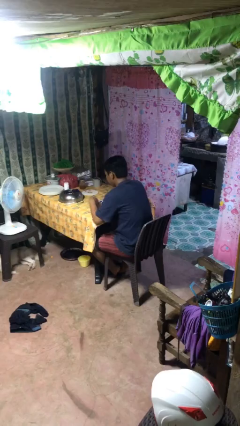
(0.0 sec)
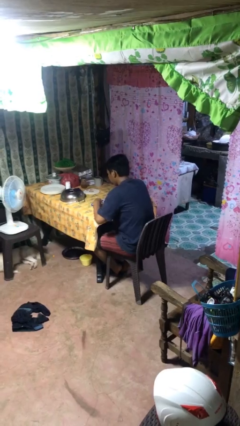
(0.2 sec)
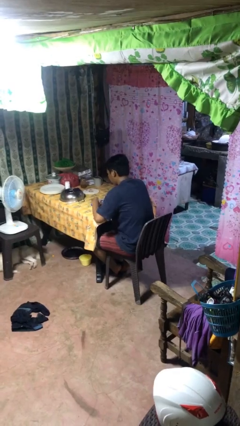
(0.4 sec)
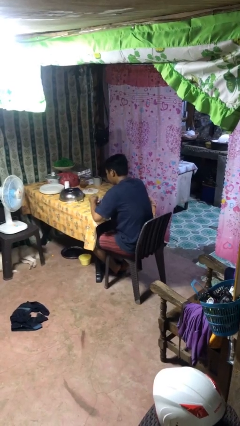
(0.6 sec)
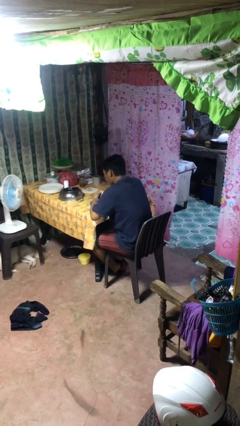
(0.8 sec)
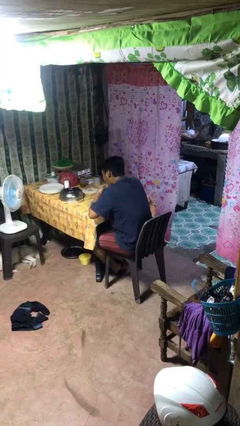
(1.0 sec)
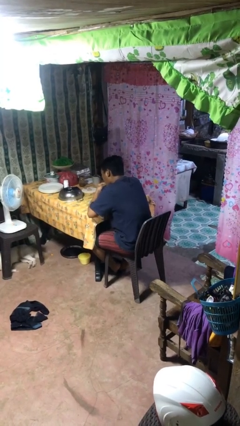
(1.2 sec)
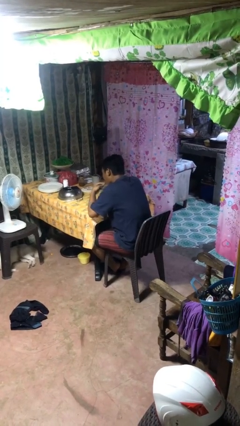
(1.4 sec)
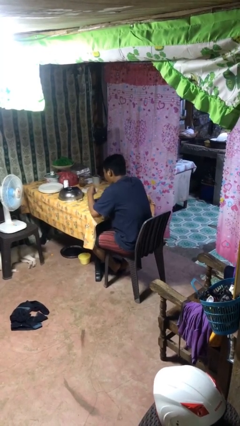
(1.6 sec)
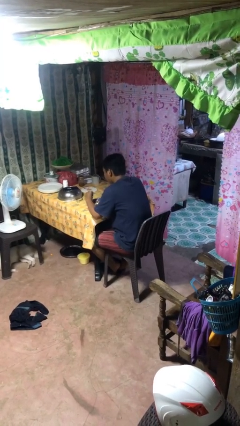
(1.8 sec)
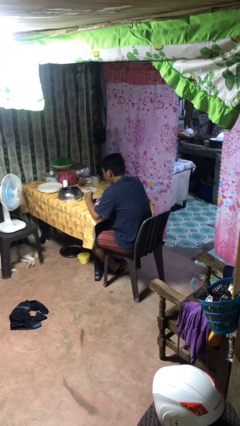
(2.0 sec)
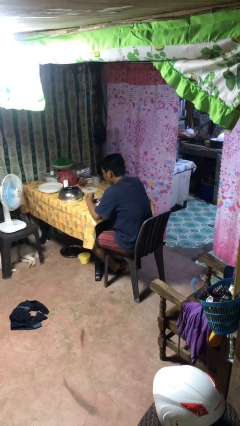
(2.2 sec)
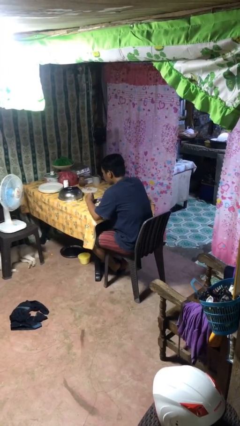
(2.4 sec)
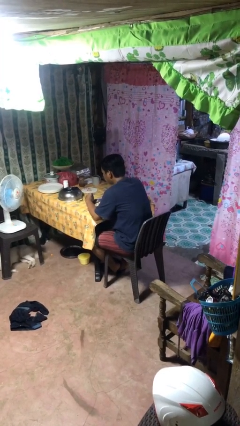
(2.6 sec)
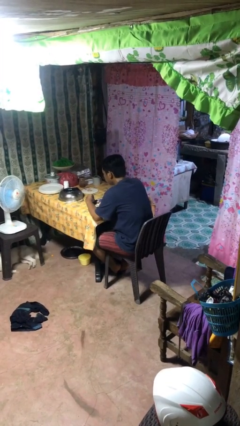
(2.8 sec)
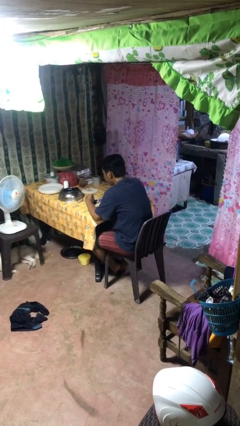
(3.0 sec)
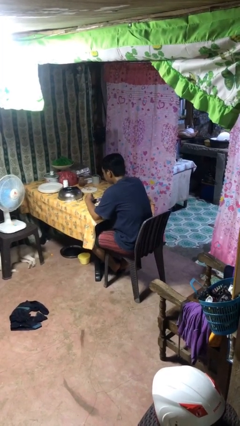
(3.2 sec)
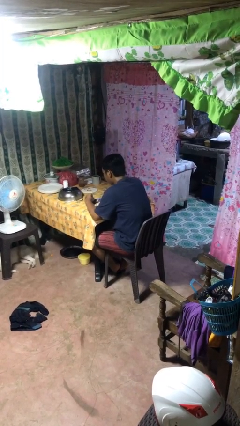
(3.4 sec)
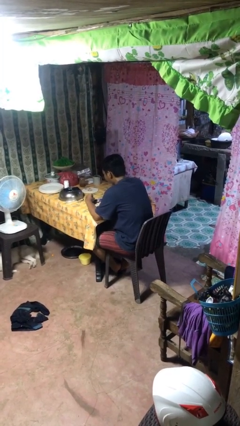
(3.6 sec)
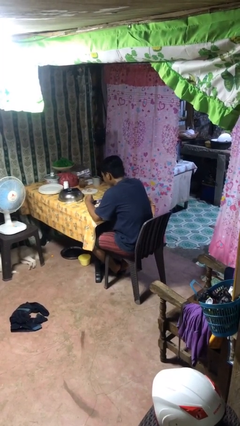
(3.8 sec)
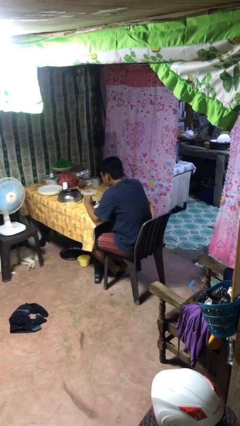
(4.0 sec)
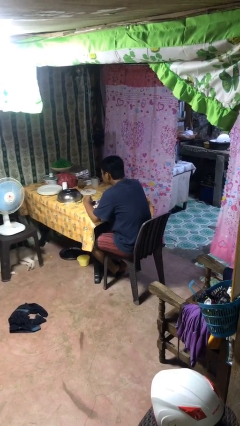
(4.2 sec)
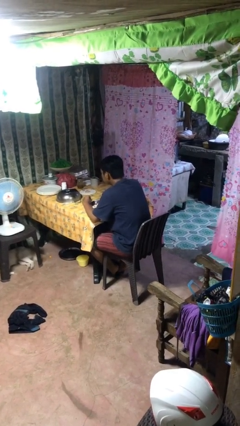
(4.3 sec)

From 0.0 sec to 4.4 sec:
person eats with hands

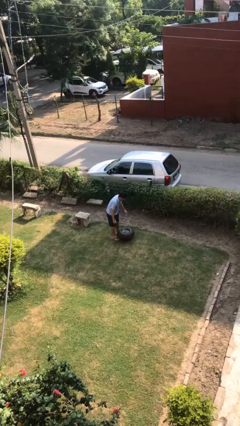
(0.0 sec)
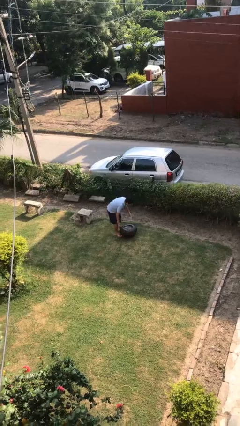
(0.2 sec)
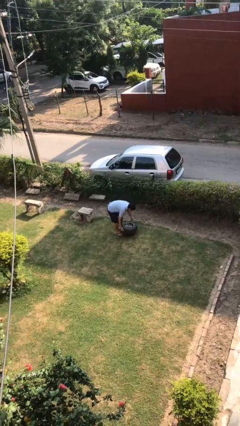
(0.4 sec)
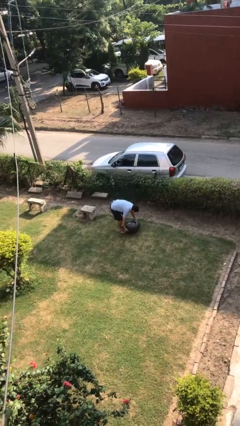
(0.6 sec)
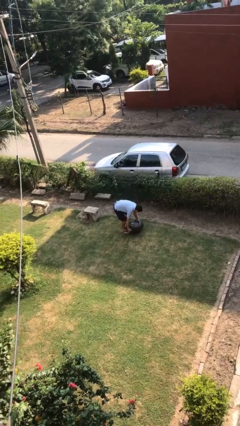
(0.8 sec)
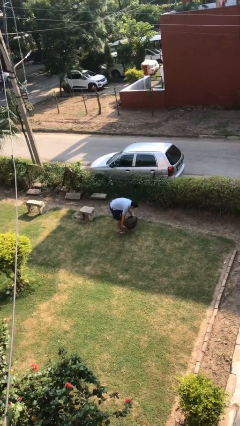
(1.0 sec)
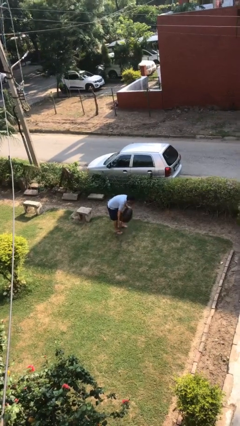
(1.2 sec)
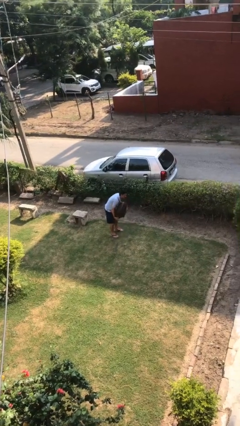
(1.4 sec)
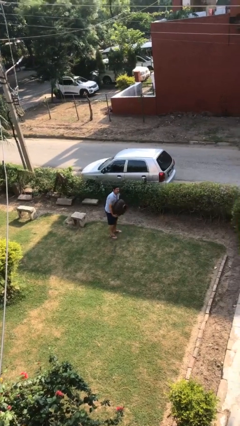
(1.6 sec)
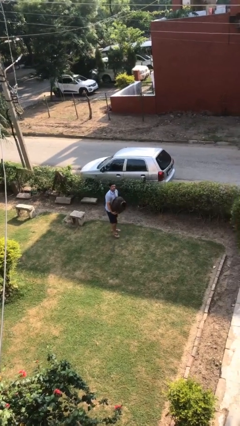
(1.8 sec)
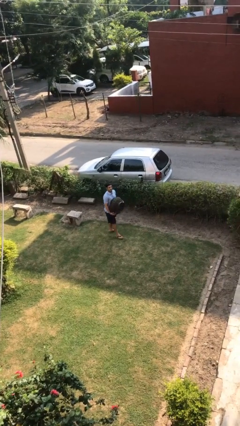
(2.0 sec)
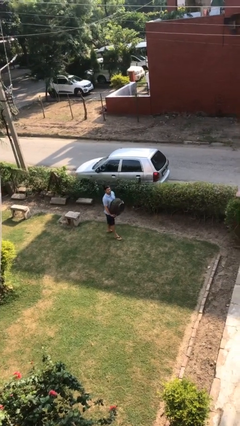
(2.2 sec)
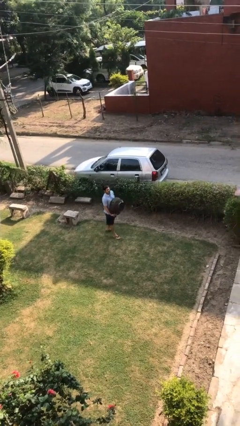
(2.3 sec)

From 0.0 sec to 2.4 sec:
person picks up object from floor

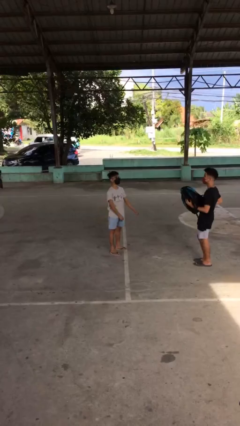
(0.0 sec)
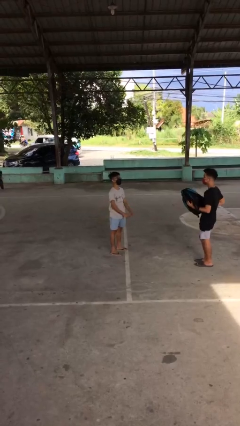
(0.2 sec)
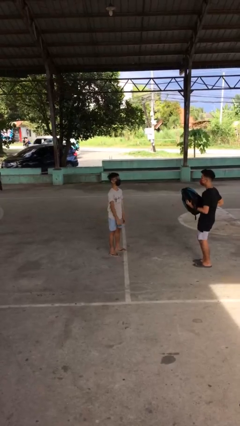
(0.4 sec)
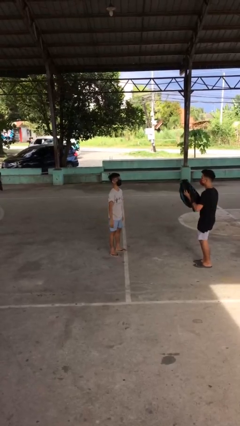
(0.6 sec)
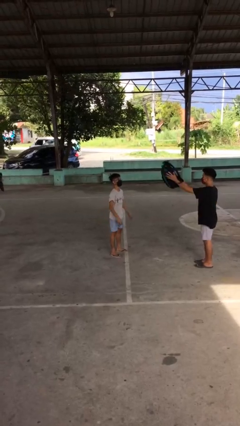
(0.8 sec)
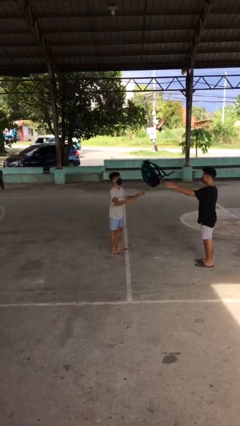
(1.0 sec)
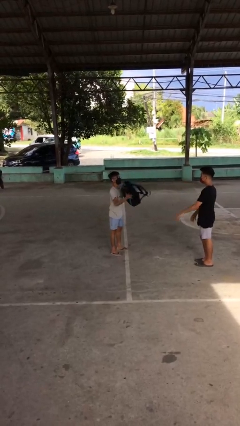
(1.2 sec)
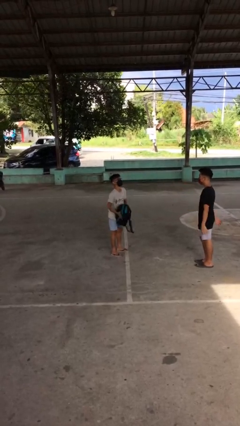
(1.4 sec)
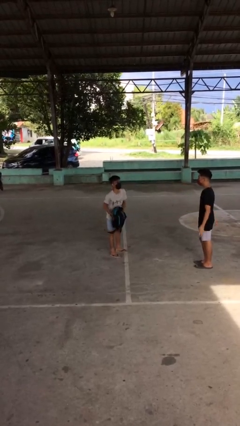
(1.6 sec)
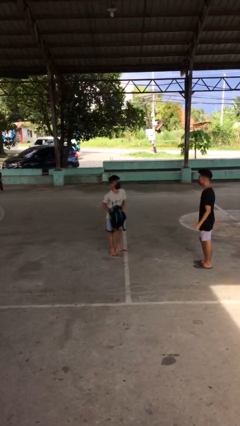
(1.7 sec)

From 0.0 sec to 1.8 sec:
person catches object from person

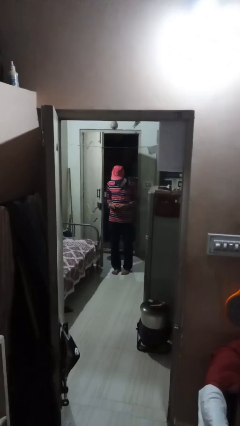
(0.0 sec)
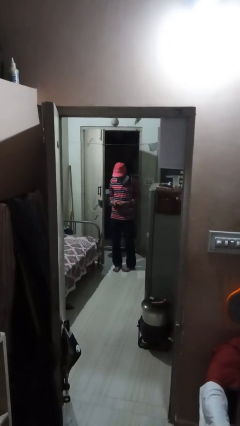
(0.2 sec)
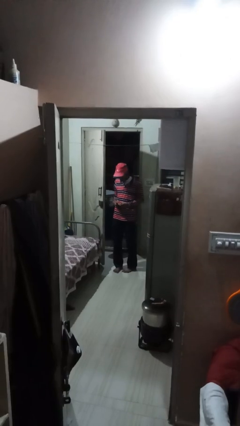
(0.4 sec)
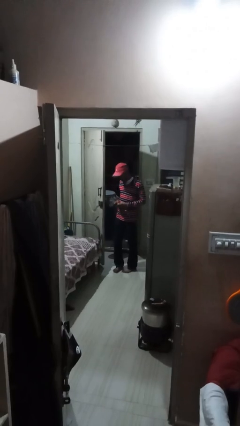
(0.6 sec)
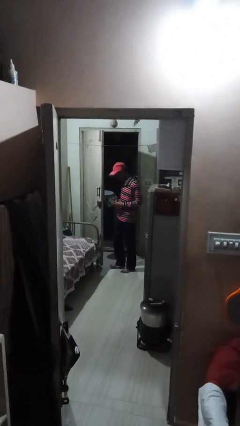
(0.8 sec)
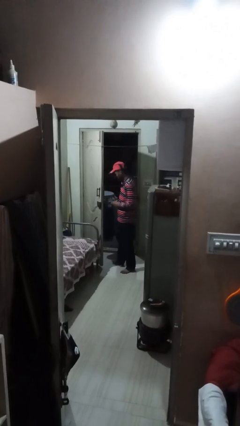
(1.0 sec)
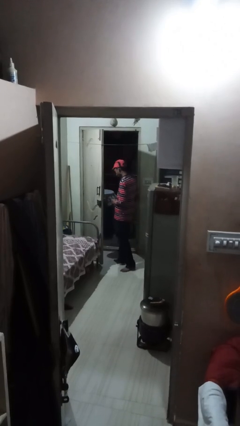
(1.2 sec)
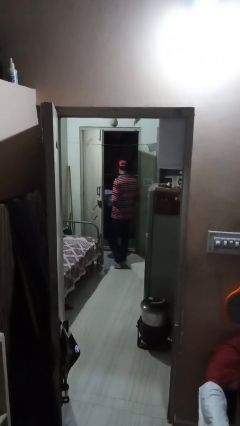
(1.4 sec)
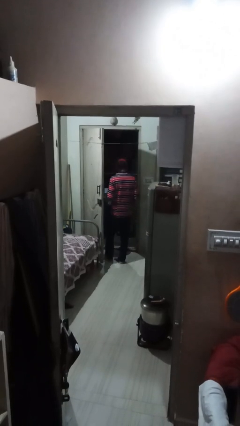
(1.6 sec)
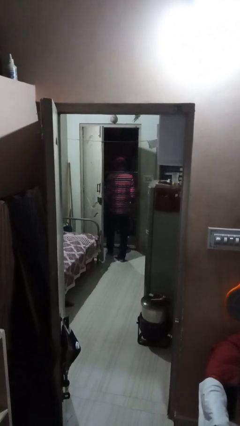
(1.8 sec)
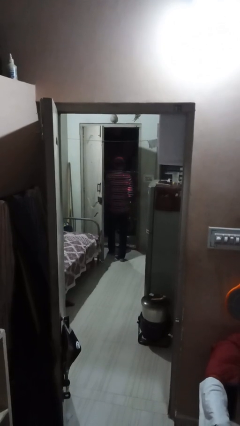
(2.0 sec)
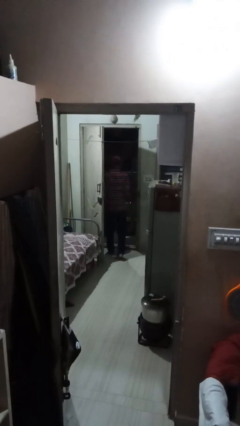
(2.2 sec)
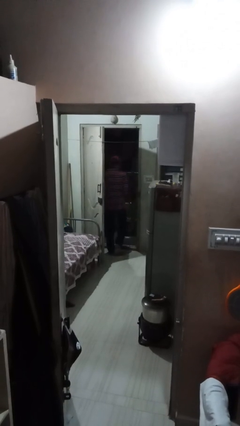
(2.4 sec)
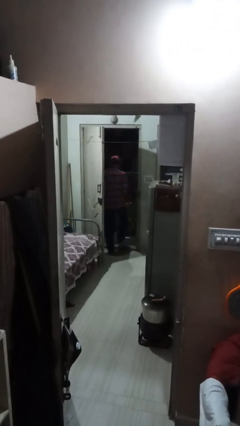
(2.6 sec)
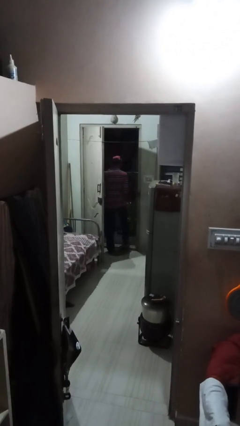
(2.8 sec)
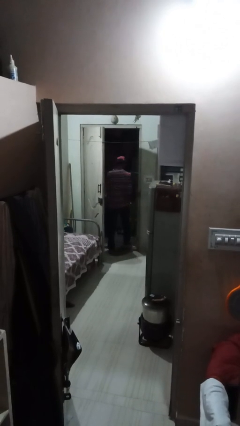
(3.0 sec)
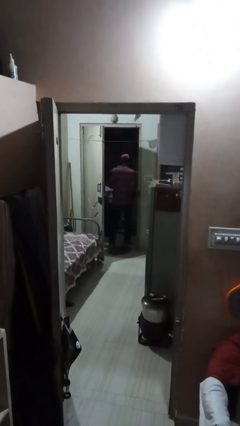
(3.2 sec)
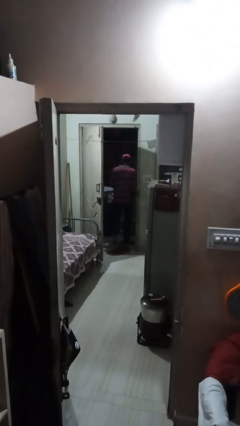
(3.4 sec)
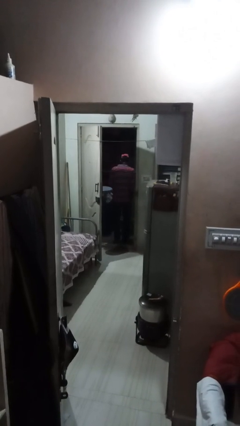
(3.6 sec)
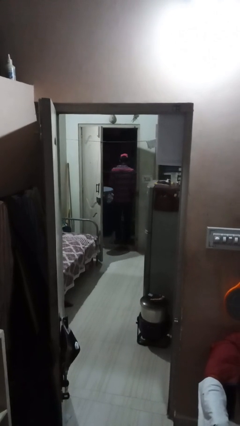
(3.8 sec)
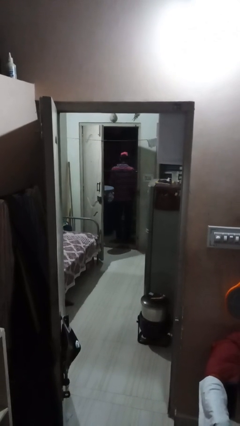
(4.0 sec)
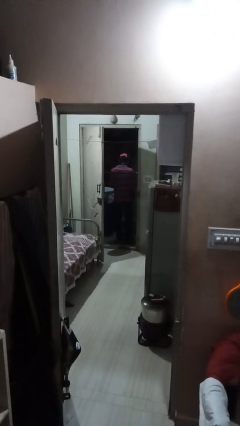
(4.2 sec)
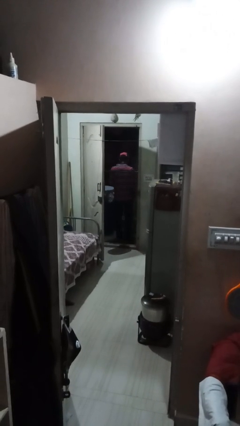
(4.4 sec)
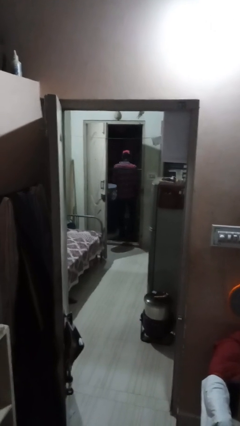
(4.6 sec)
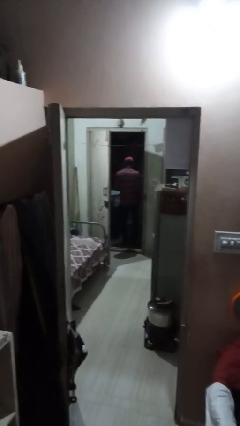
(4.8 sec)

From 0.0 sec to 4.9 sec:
person exits scene through structure

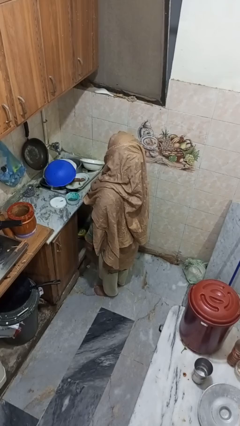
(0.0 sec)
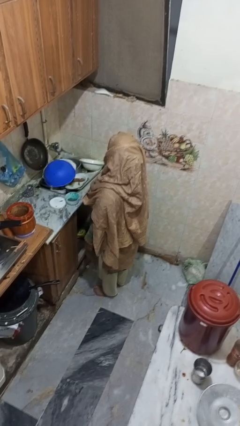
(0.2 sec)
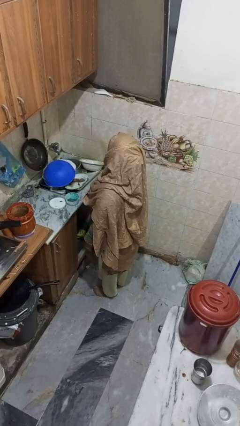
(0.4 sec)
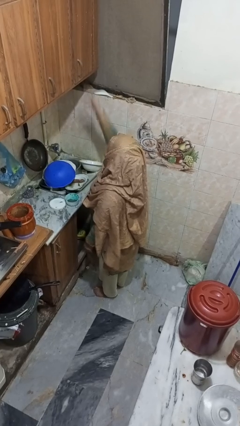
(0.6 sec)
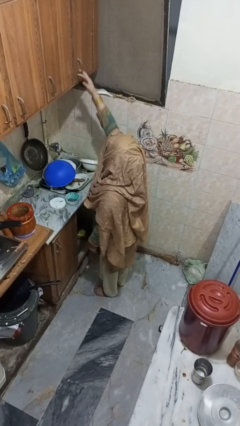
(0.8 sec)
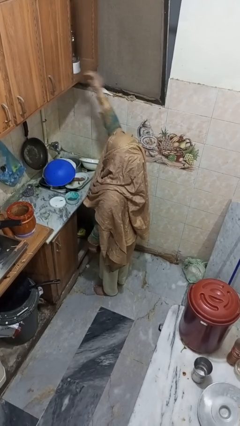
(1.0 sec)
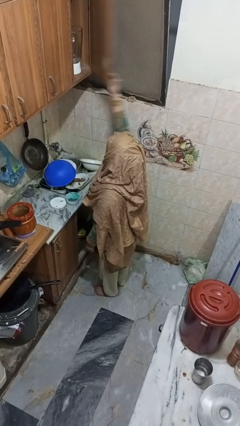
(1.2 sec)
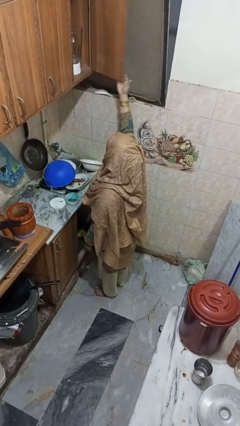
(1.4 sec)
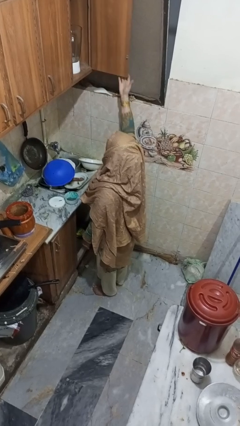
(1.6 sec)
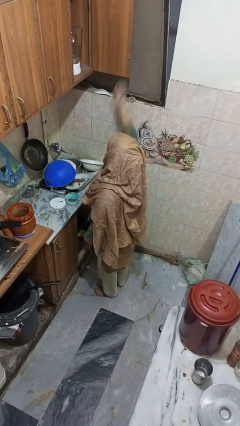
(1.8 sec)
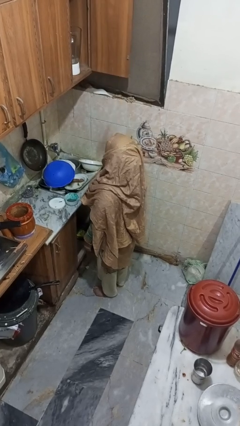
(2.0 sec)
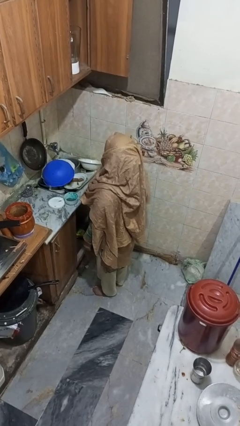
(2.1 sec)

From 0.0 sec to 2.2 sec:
person opens cabinet

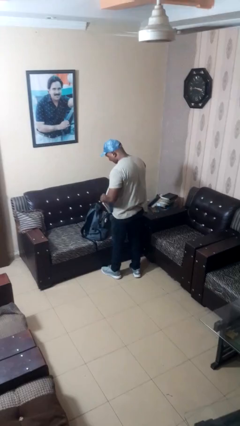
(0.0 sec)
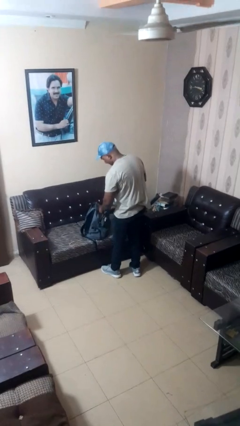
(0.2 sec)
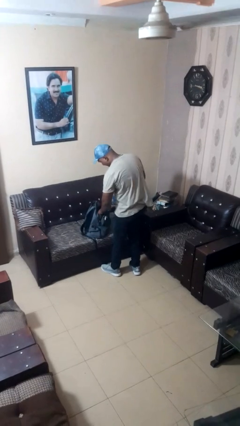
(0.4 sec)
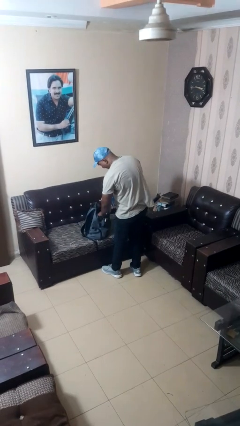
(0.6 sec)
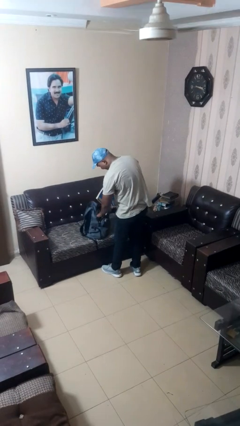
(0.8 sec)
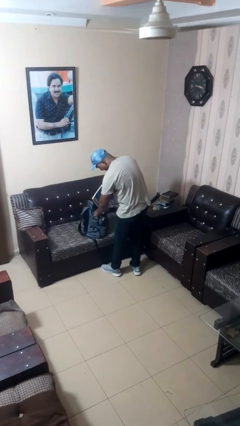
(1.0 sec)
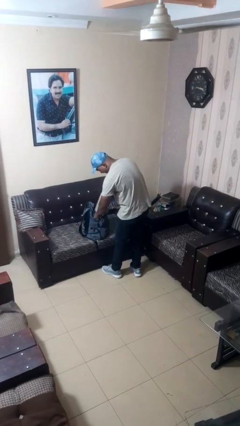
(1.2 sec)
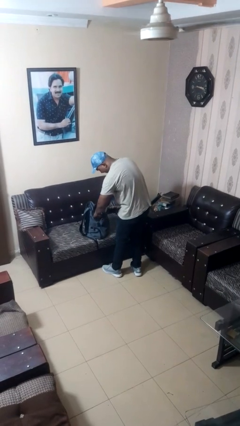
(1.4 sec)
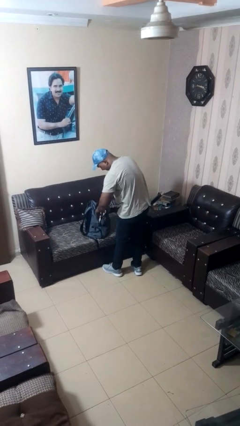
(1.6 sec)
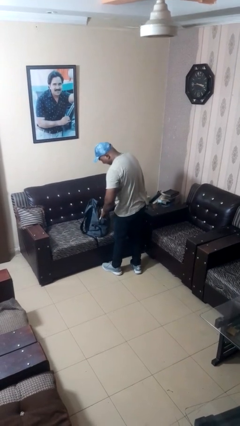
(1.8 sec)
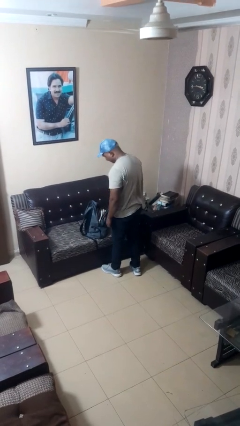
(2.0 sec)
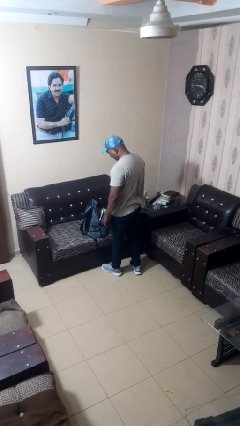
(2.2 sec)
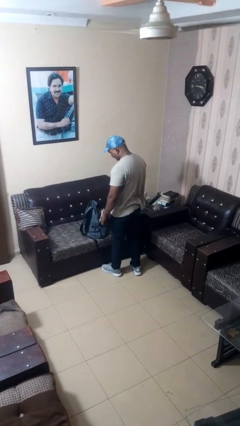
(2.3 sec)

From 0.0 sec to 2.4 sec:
person puts object into backpack
